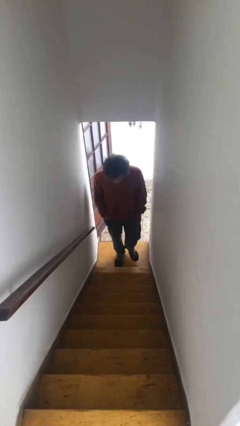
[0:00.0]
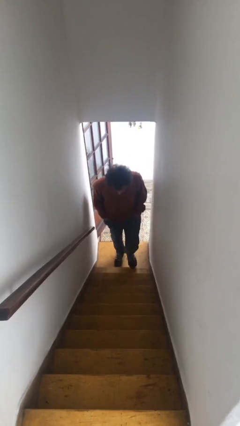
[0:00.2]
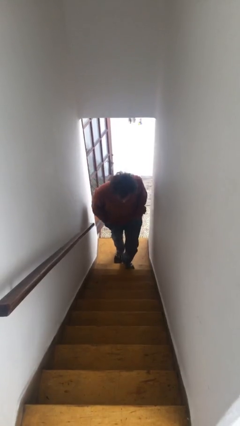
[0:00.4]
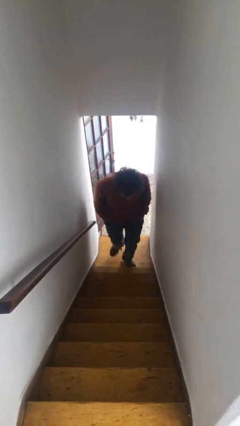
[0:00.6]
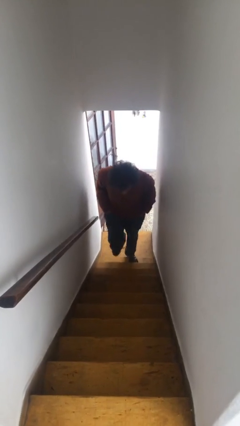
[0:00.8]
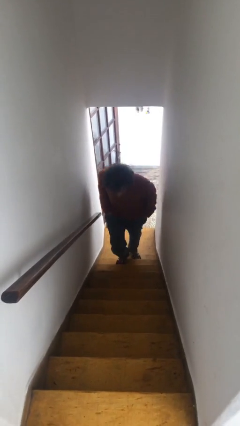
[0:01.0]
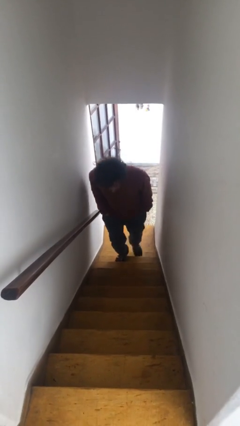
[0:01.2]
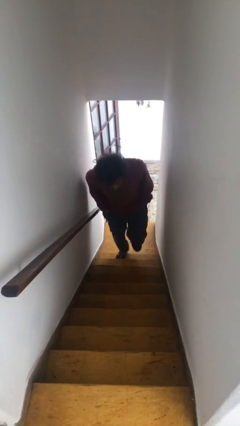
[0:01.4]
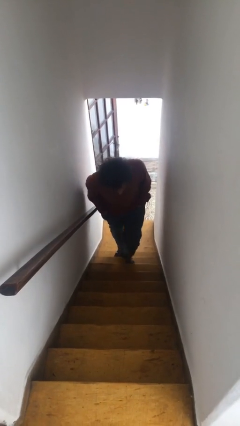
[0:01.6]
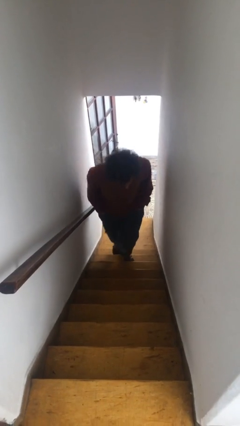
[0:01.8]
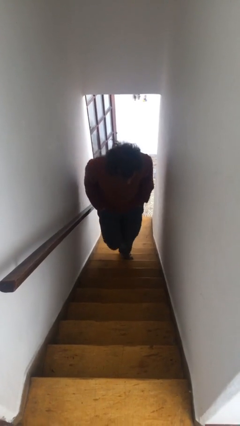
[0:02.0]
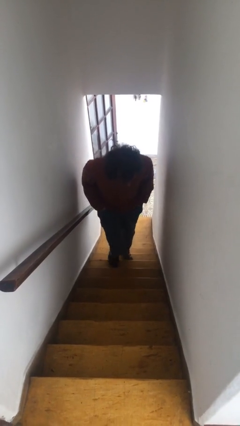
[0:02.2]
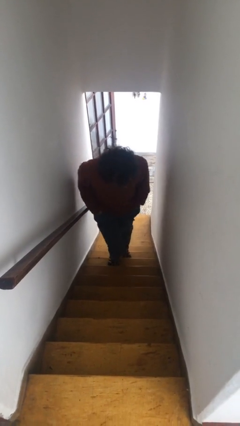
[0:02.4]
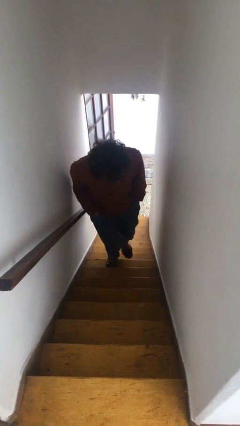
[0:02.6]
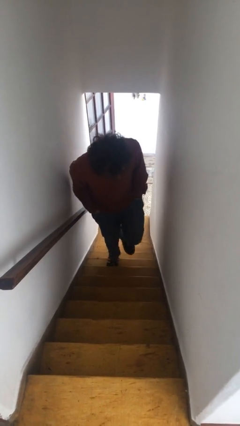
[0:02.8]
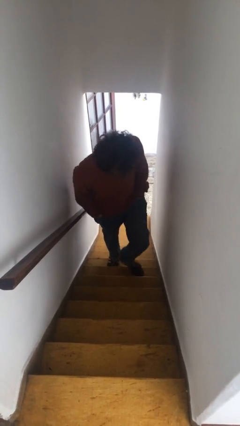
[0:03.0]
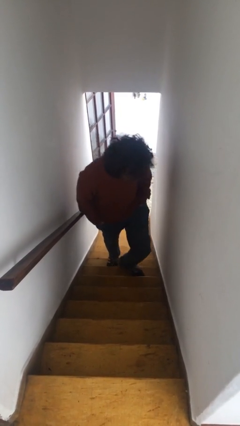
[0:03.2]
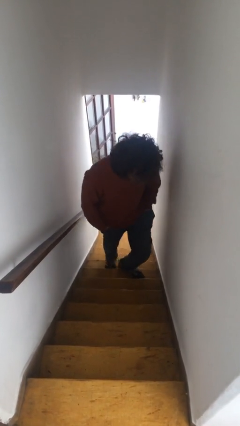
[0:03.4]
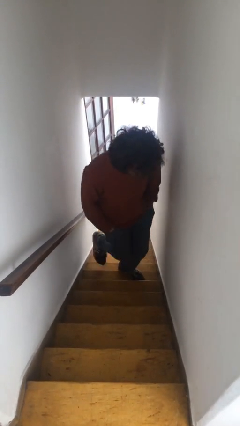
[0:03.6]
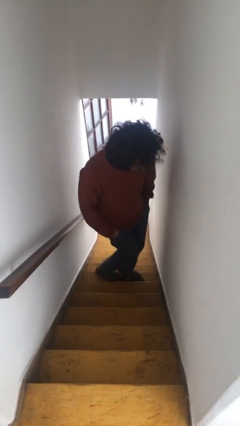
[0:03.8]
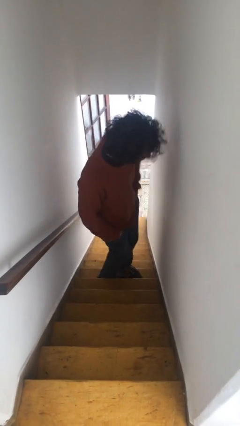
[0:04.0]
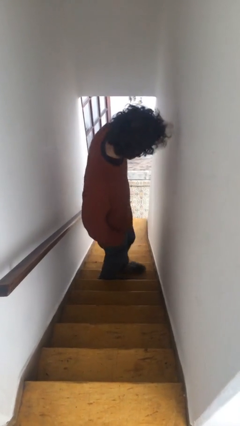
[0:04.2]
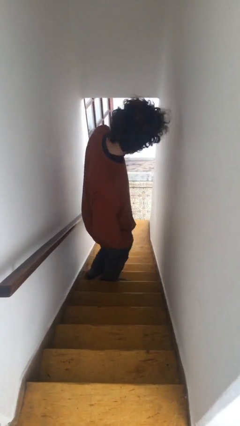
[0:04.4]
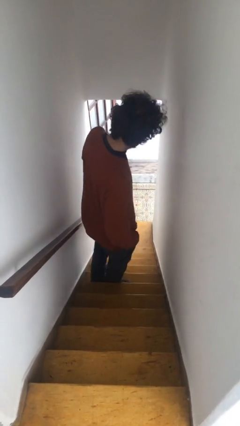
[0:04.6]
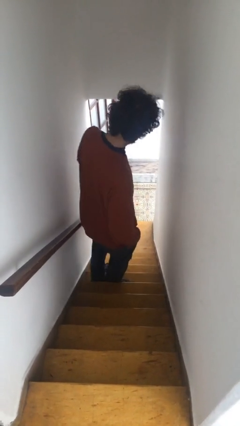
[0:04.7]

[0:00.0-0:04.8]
person climbs up stairs

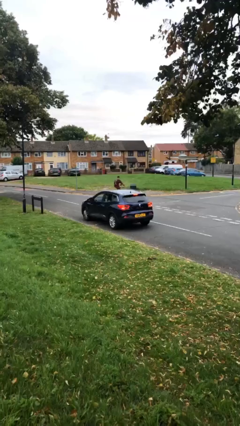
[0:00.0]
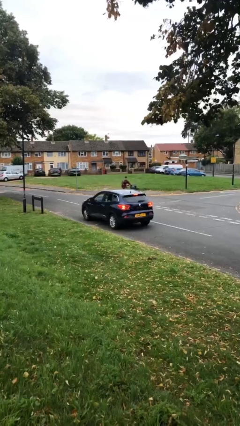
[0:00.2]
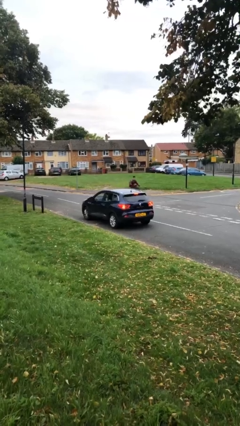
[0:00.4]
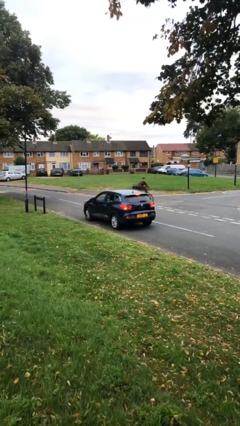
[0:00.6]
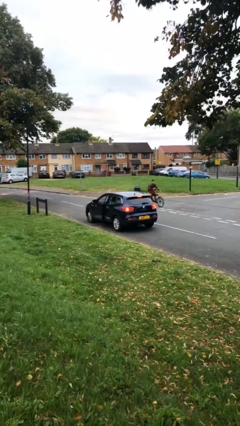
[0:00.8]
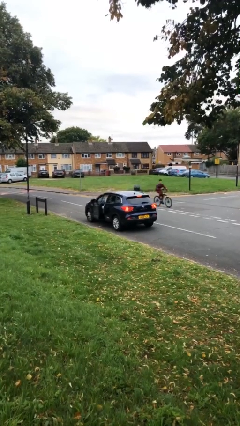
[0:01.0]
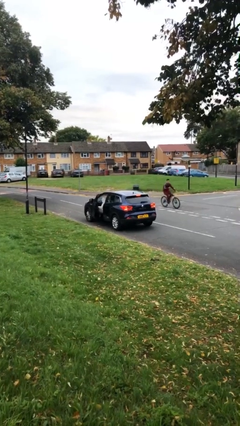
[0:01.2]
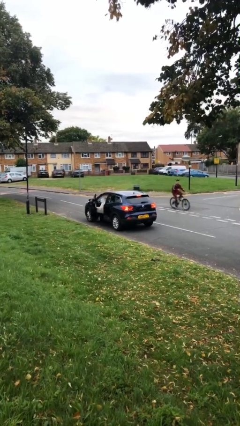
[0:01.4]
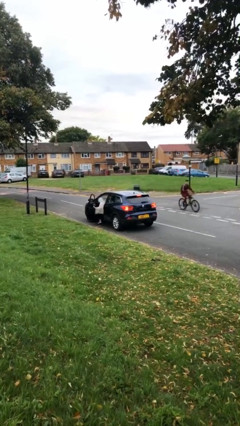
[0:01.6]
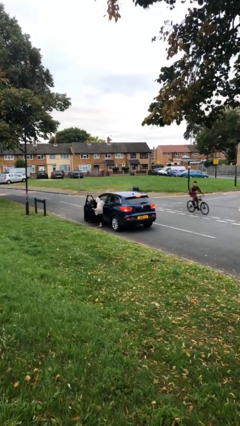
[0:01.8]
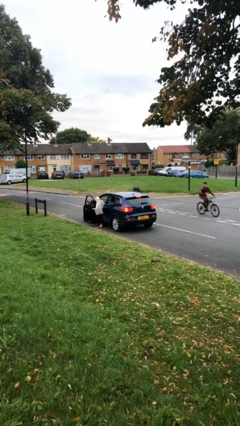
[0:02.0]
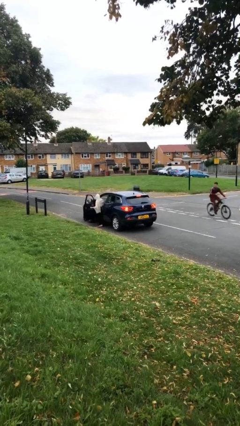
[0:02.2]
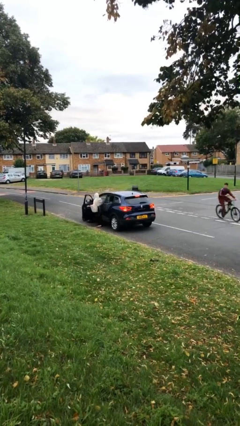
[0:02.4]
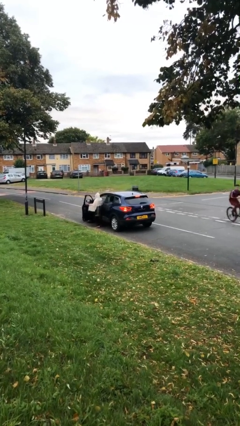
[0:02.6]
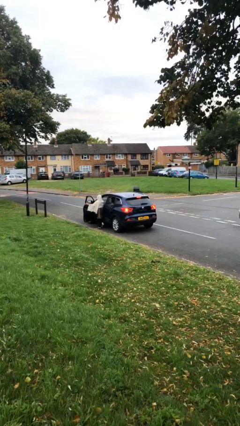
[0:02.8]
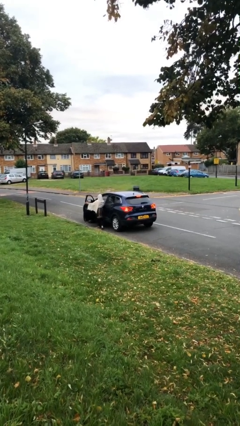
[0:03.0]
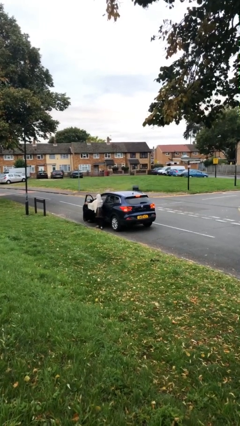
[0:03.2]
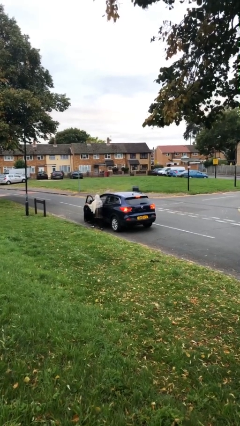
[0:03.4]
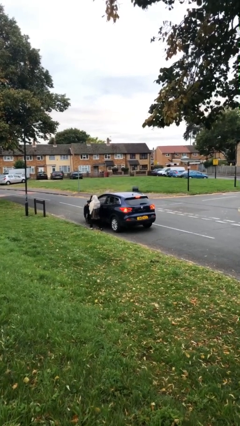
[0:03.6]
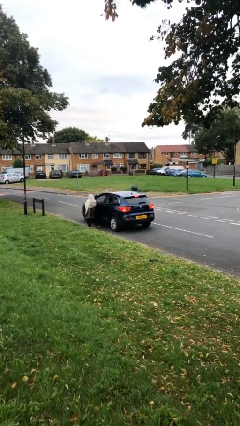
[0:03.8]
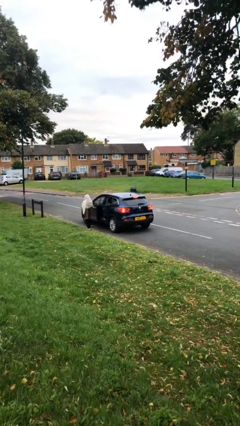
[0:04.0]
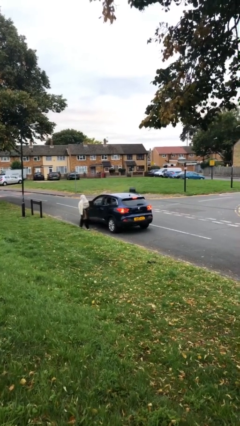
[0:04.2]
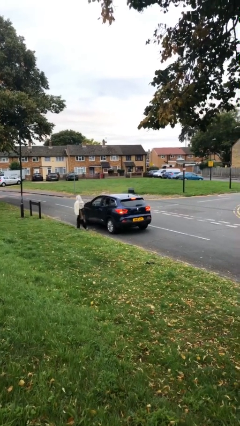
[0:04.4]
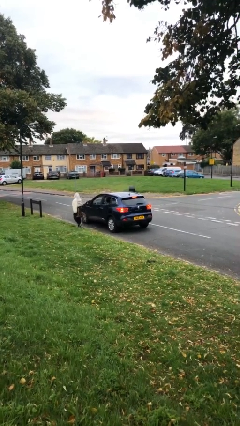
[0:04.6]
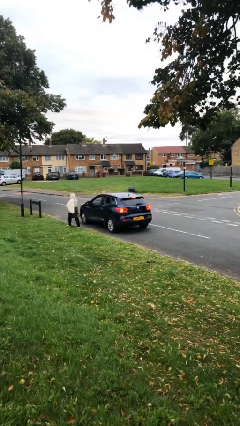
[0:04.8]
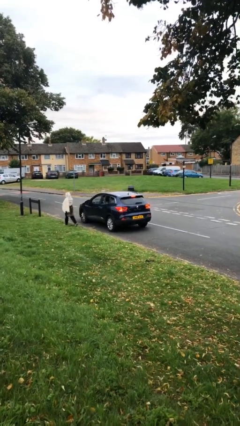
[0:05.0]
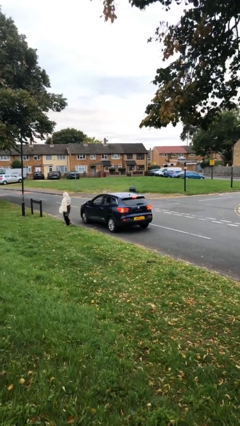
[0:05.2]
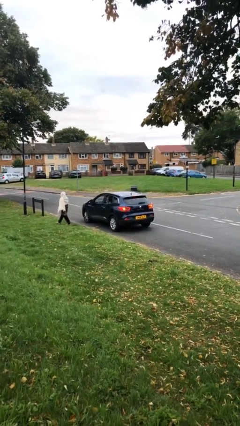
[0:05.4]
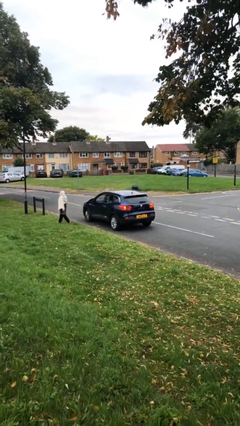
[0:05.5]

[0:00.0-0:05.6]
car drops off person

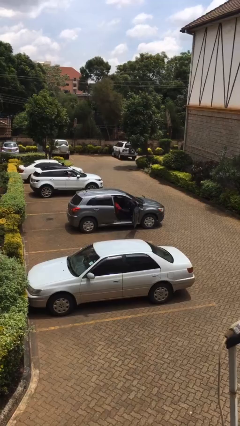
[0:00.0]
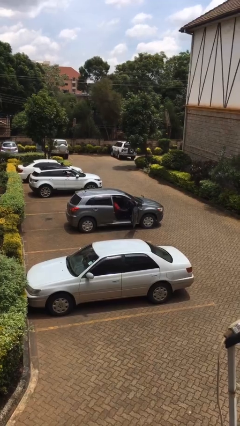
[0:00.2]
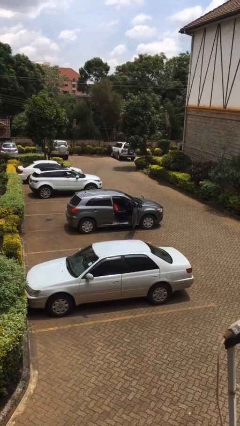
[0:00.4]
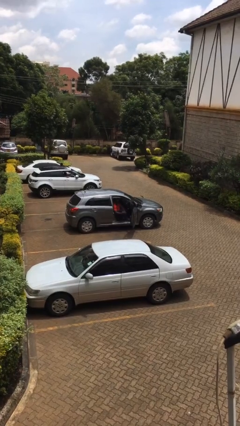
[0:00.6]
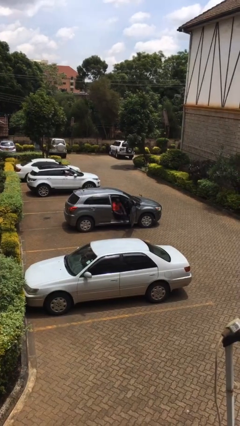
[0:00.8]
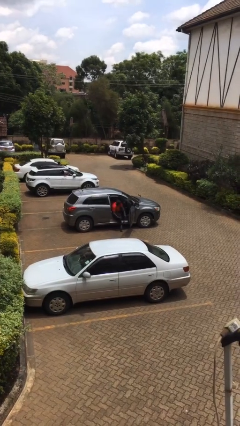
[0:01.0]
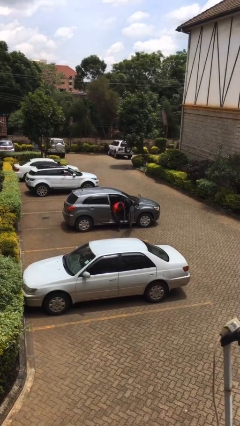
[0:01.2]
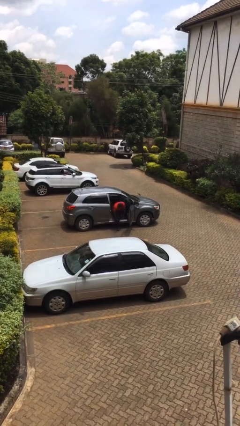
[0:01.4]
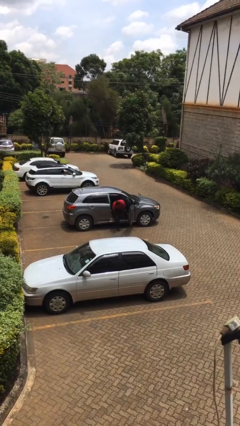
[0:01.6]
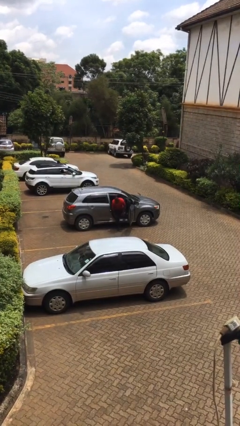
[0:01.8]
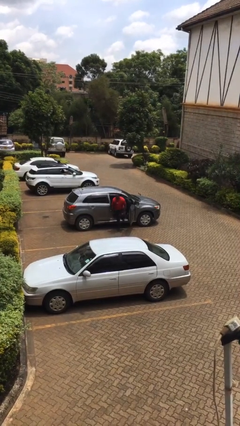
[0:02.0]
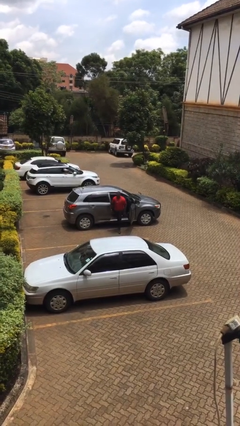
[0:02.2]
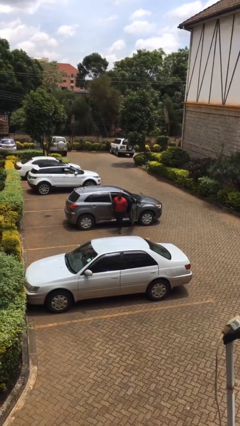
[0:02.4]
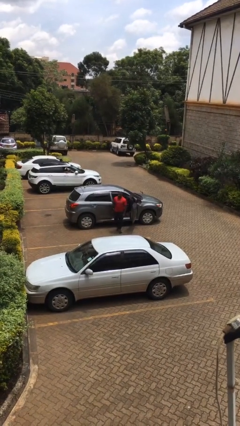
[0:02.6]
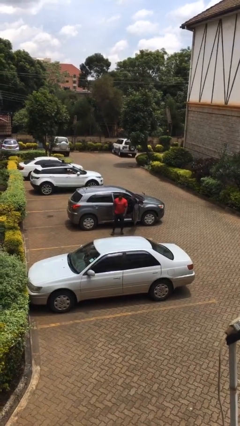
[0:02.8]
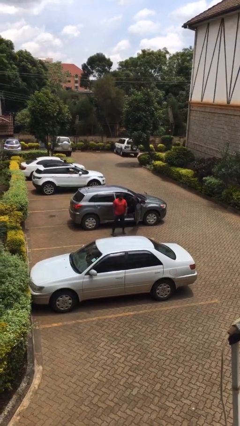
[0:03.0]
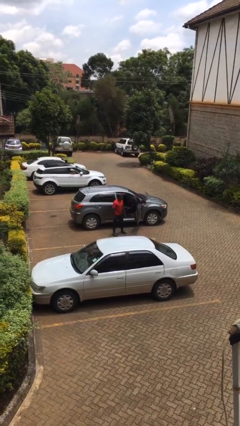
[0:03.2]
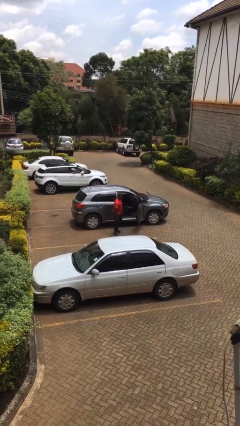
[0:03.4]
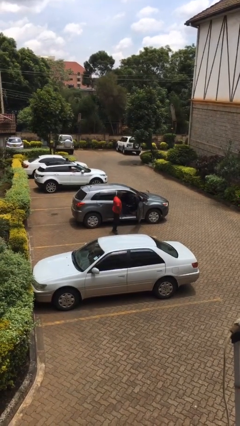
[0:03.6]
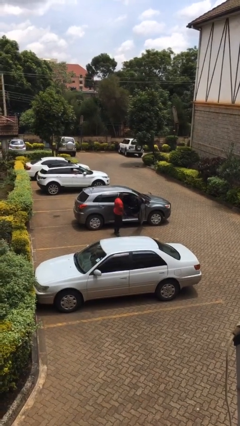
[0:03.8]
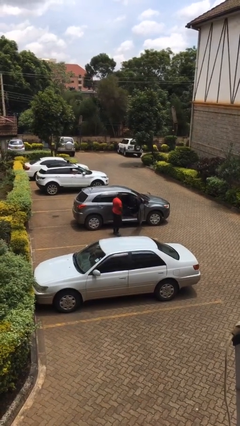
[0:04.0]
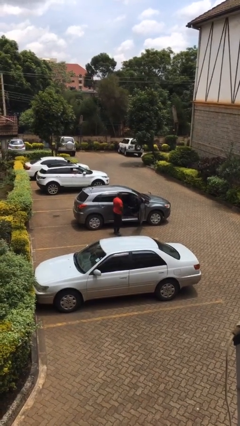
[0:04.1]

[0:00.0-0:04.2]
person exits car

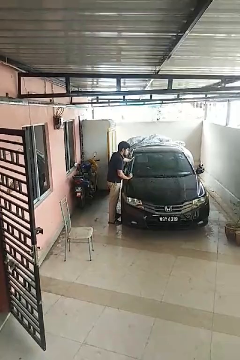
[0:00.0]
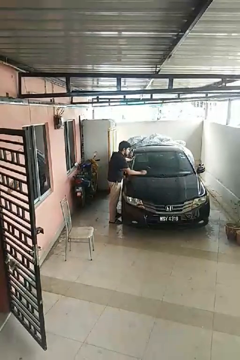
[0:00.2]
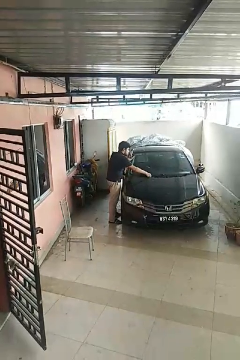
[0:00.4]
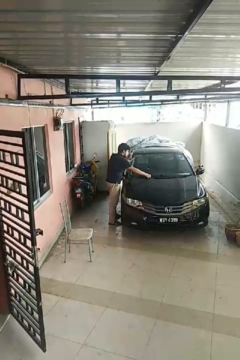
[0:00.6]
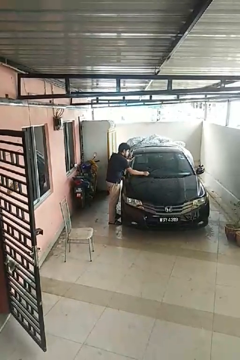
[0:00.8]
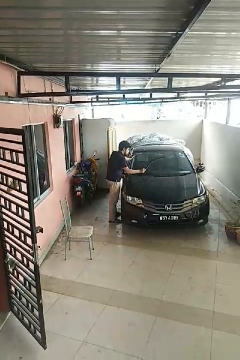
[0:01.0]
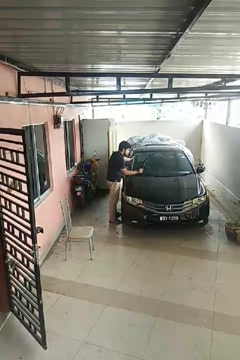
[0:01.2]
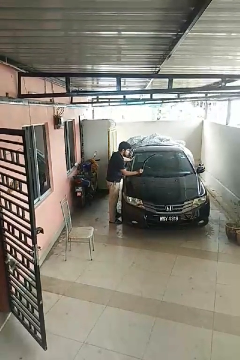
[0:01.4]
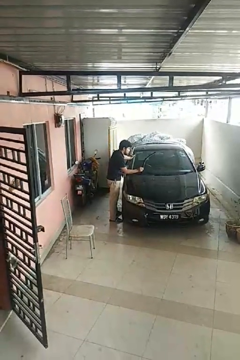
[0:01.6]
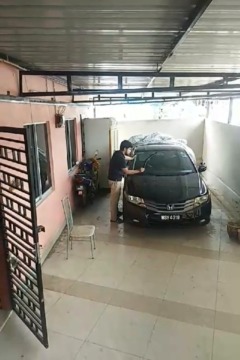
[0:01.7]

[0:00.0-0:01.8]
person flips up car wipers

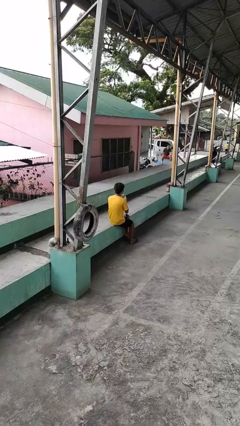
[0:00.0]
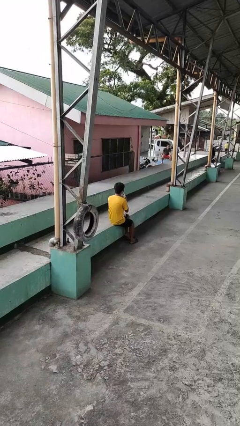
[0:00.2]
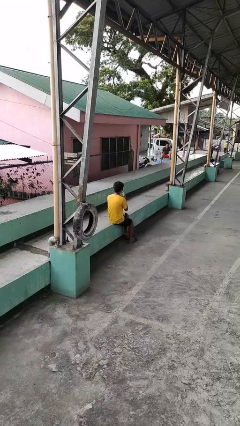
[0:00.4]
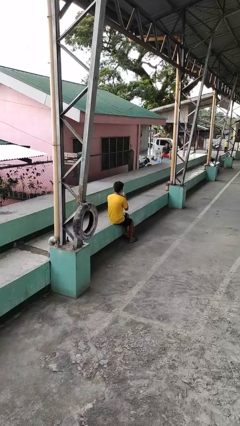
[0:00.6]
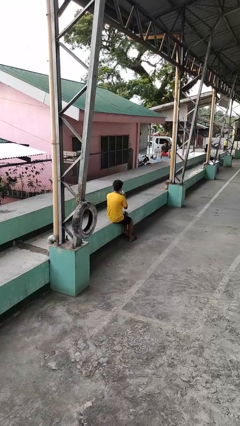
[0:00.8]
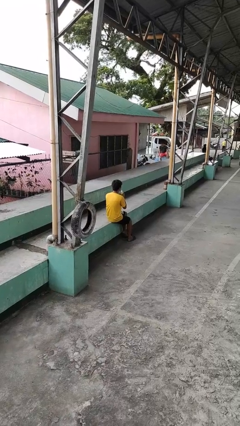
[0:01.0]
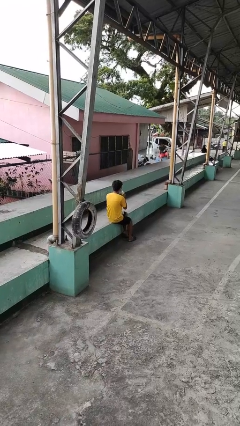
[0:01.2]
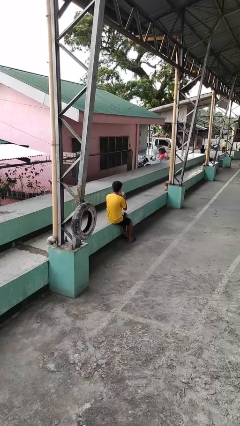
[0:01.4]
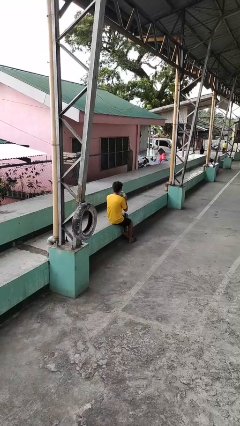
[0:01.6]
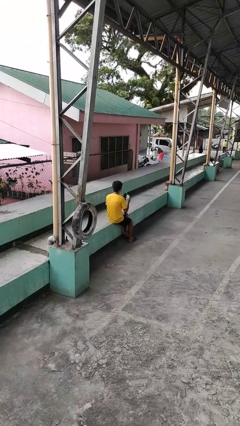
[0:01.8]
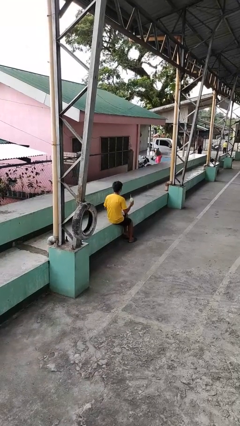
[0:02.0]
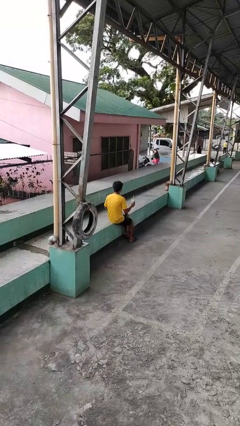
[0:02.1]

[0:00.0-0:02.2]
person drinks from straw
